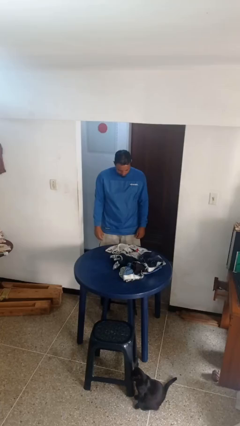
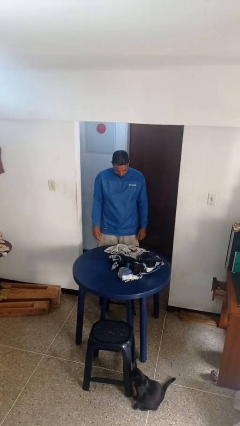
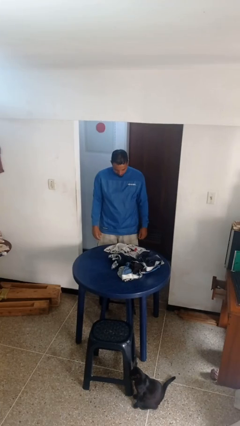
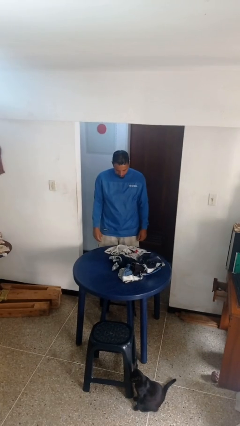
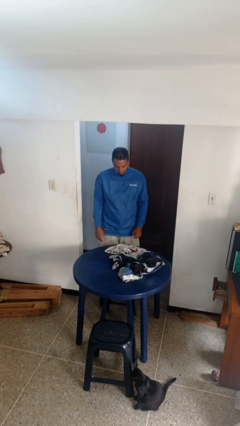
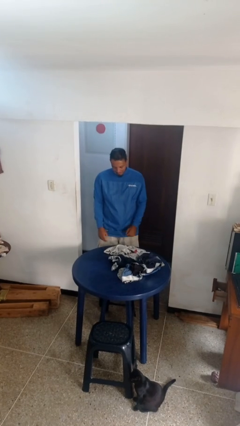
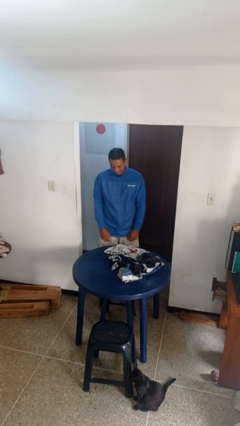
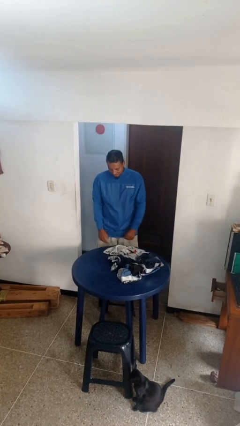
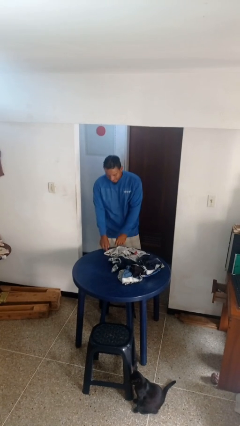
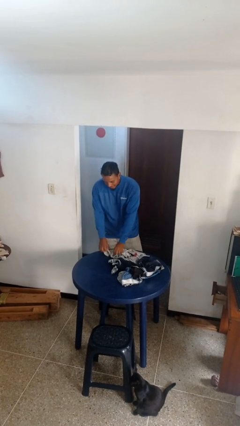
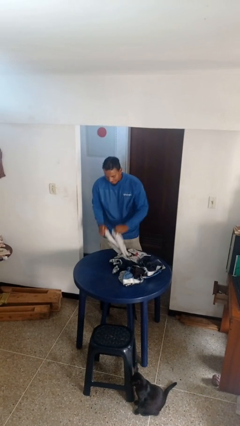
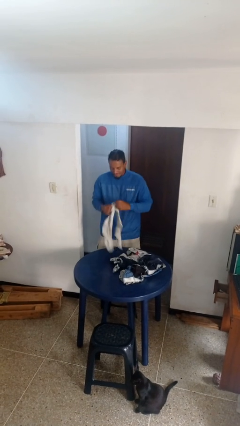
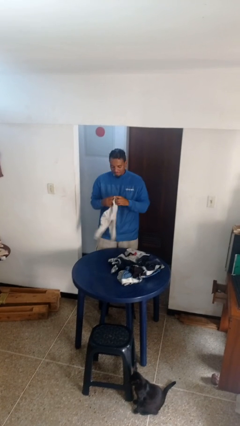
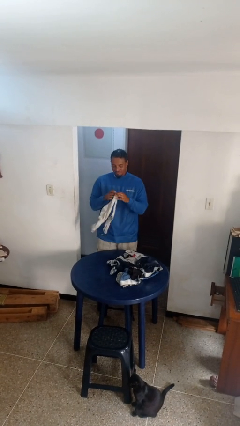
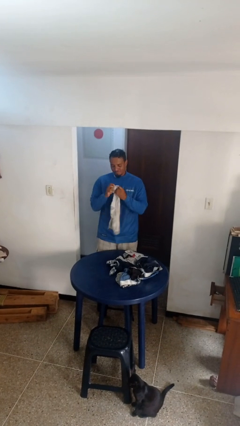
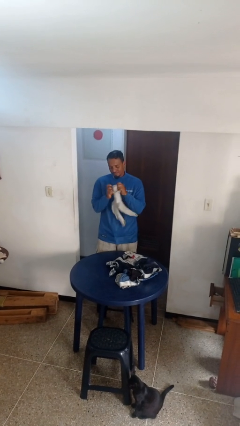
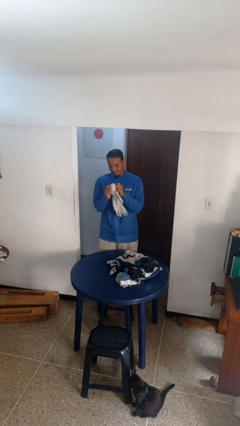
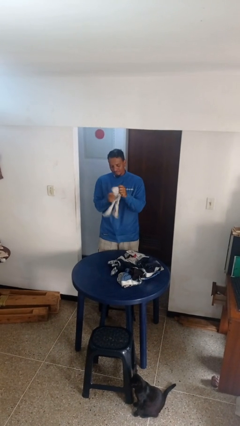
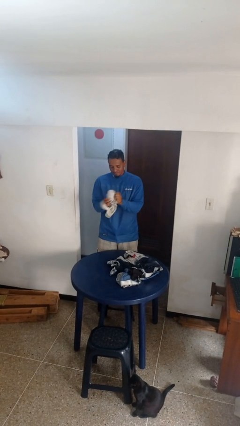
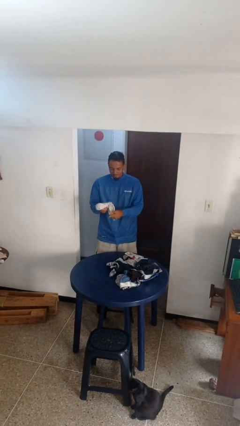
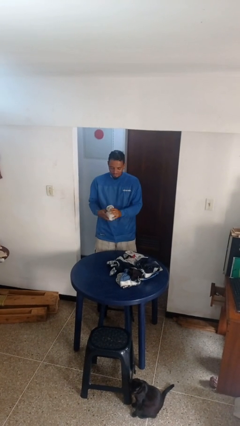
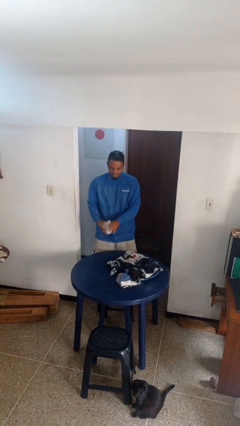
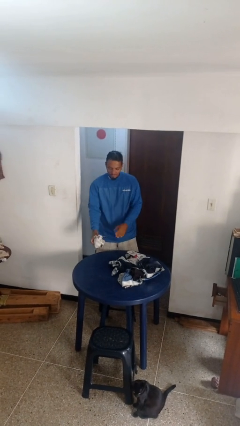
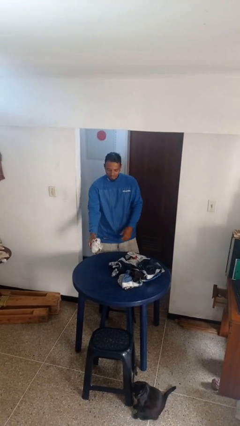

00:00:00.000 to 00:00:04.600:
person folds socks

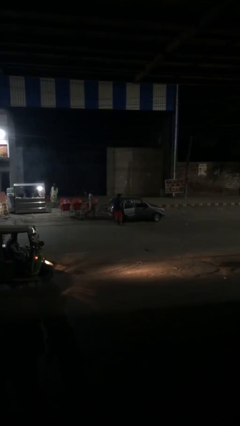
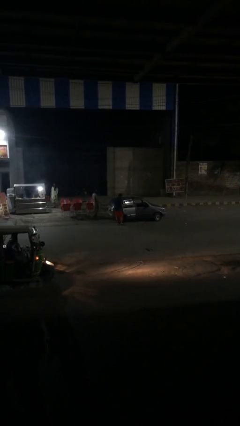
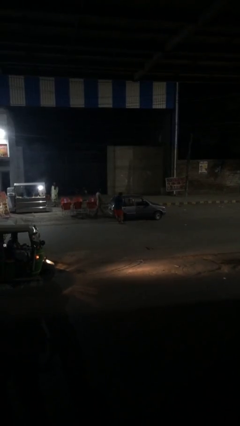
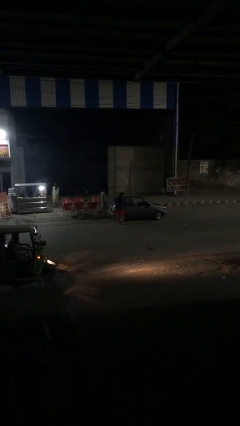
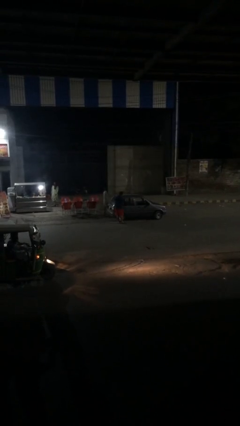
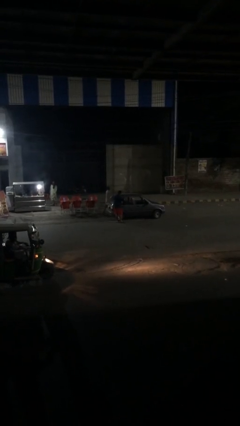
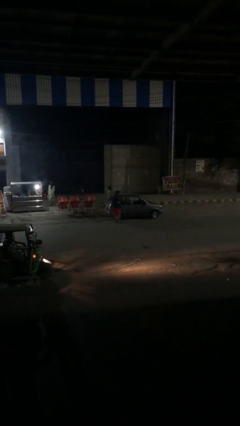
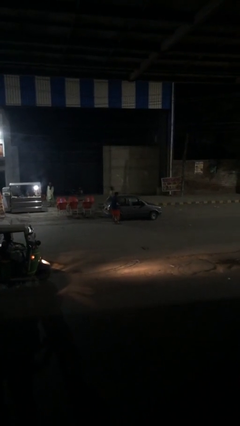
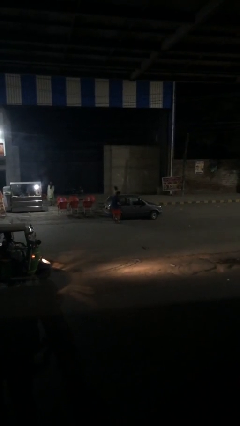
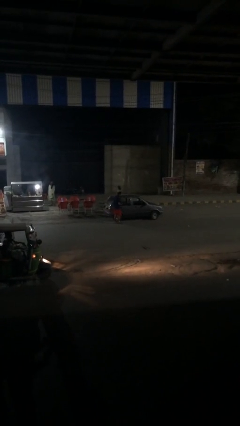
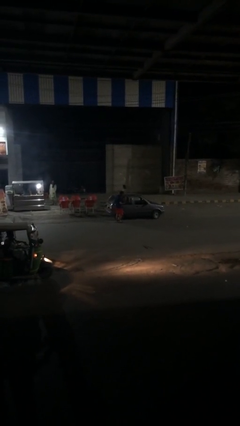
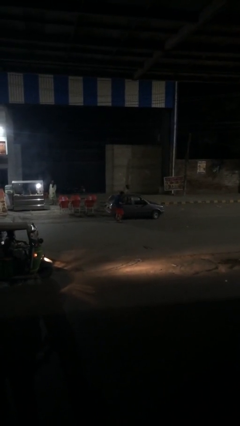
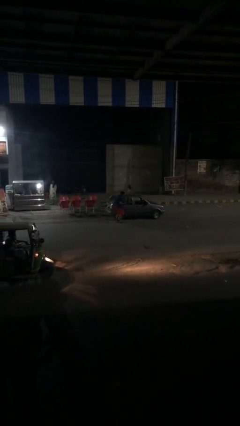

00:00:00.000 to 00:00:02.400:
person closes car door

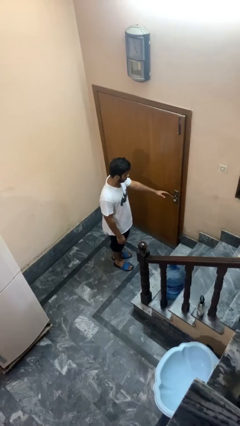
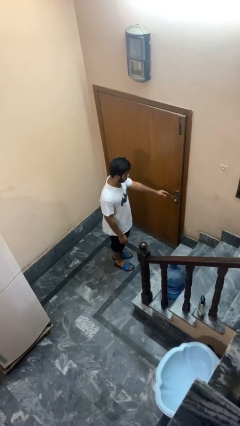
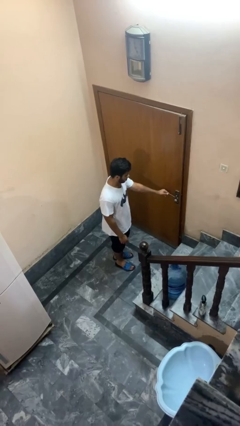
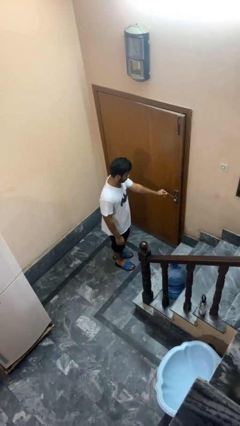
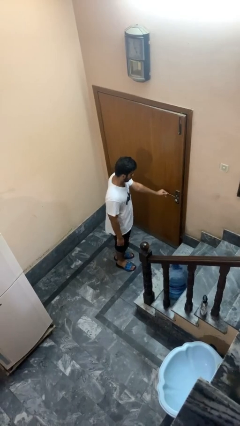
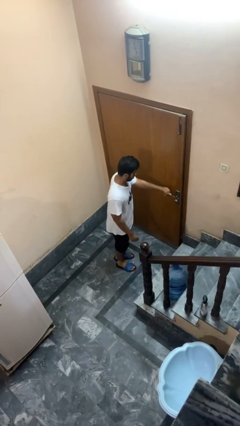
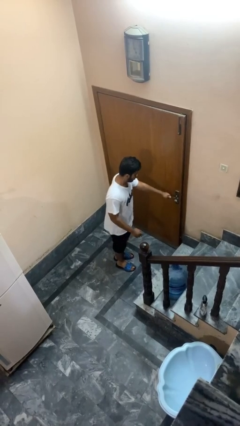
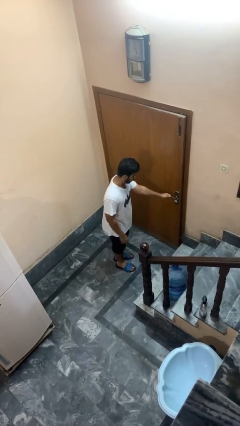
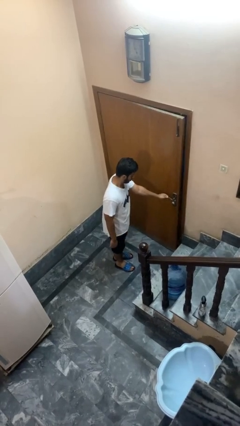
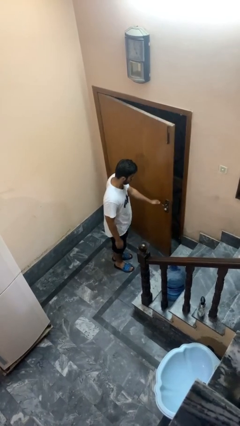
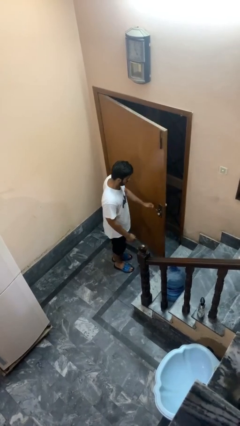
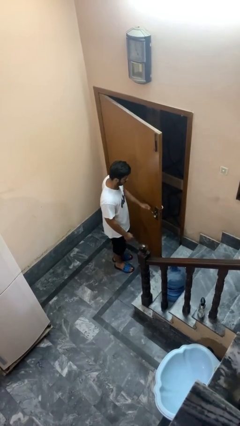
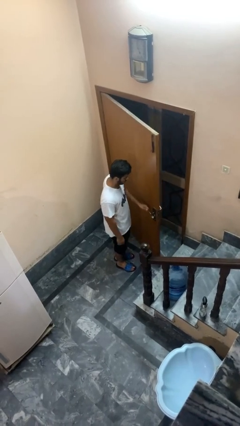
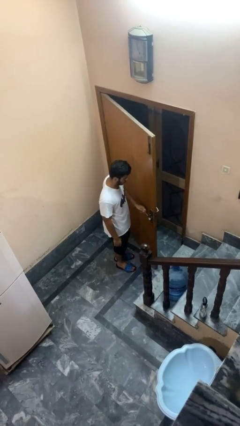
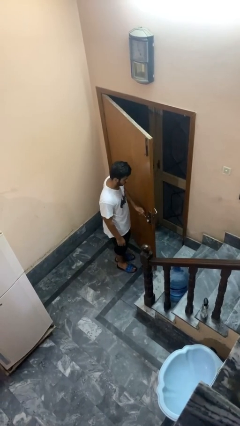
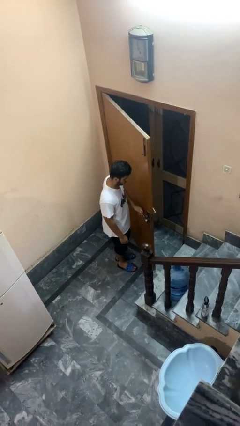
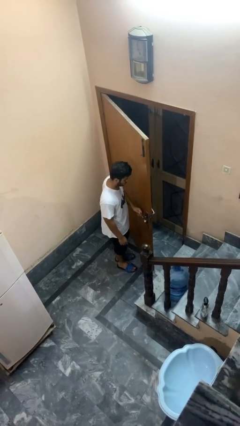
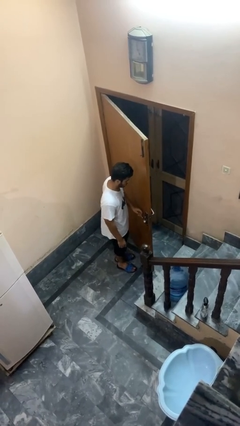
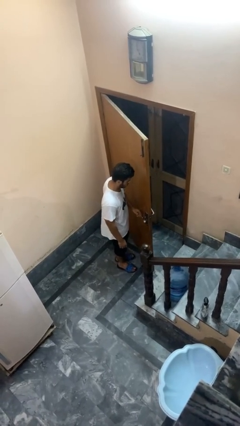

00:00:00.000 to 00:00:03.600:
person opens facility door

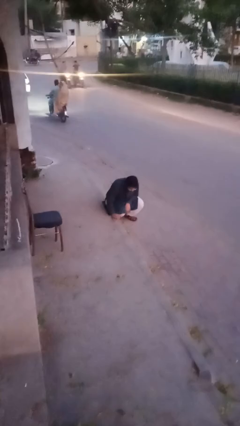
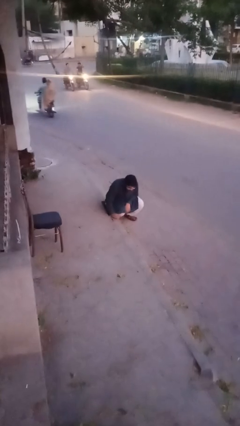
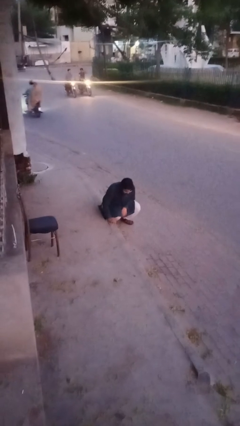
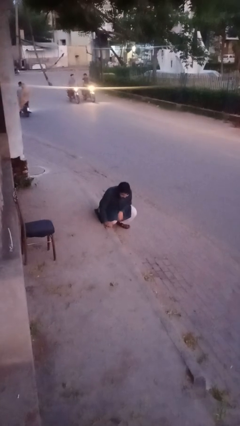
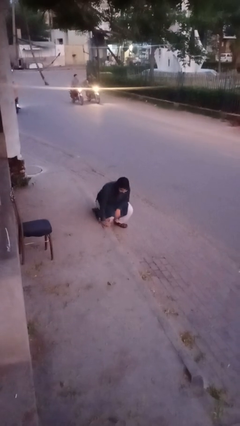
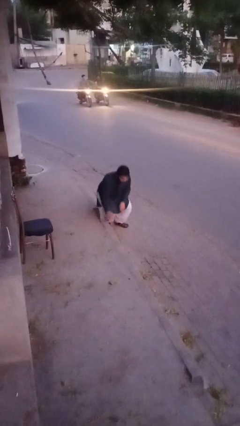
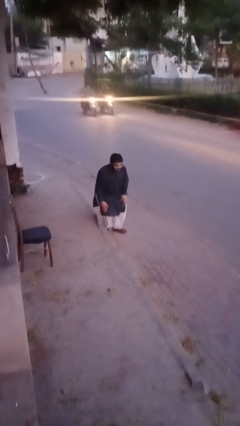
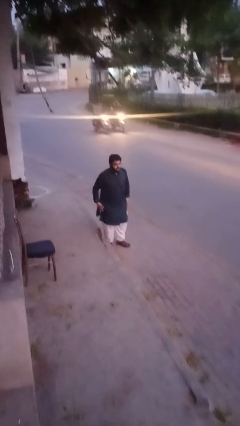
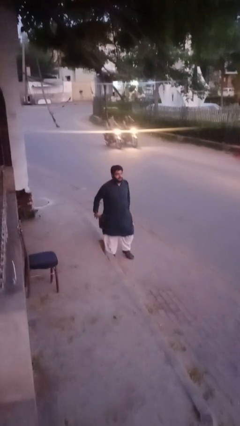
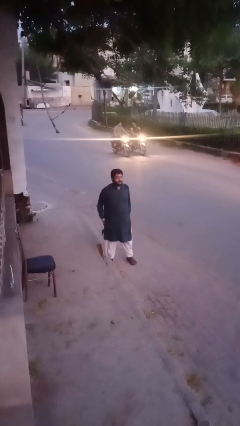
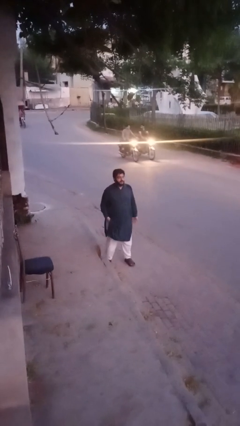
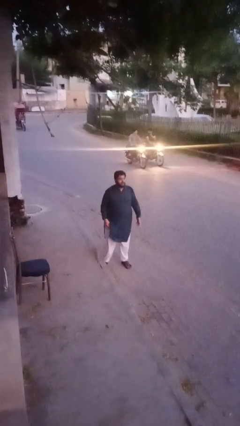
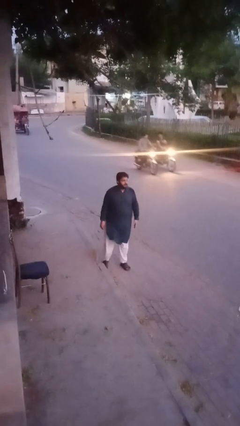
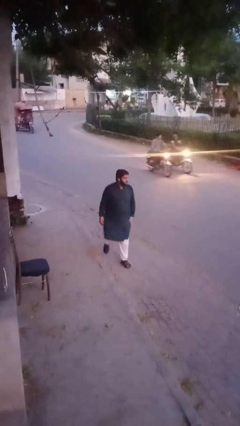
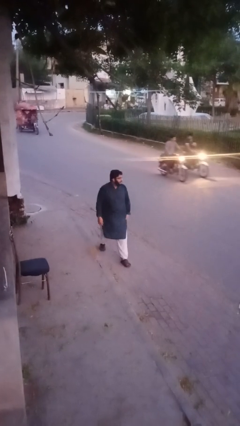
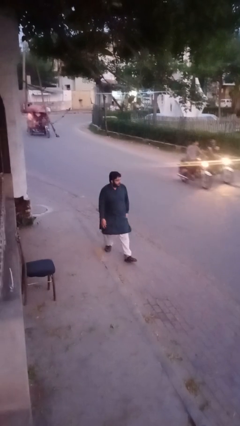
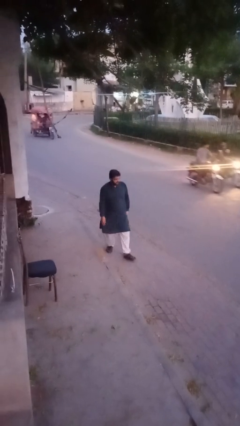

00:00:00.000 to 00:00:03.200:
person stands up from floor

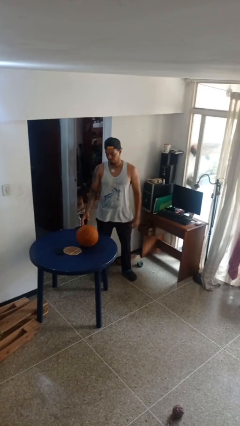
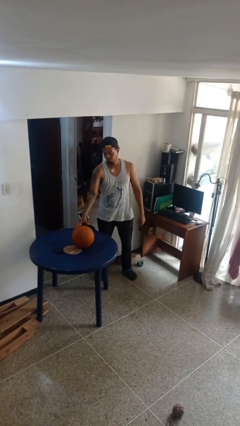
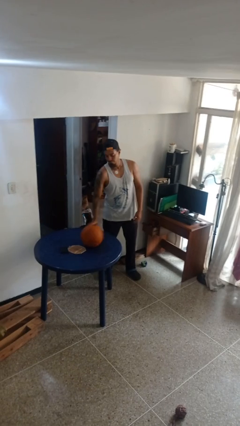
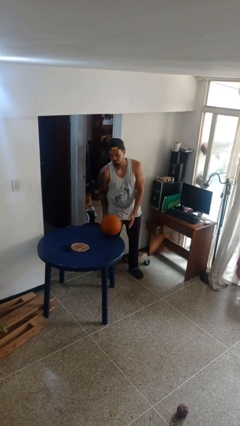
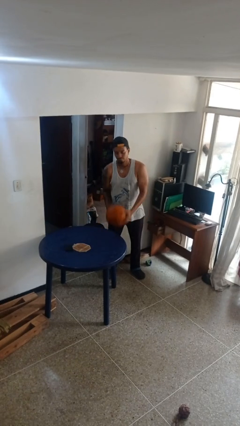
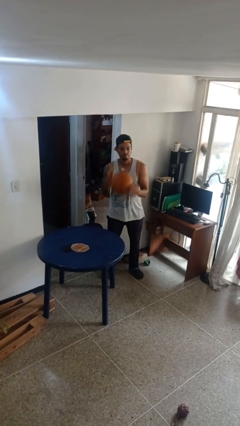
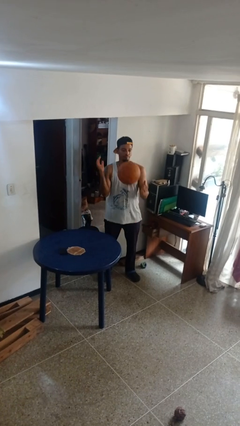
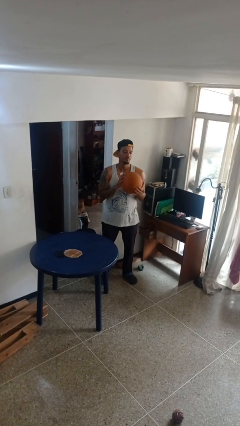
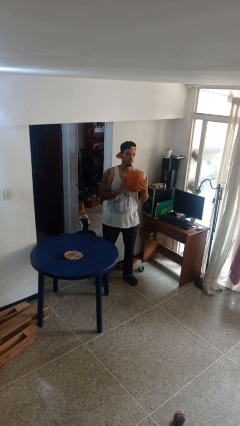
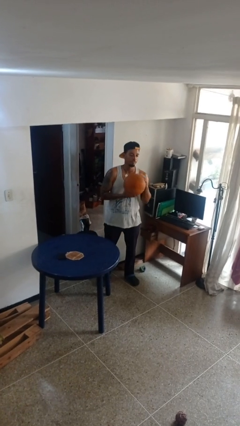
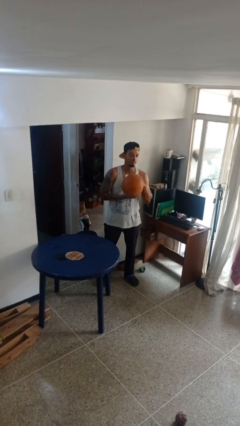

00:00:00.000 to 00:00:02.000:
person picks up object from table

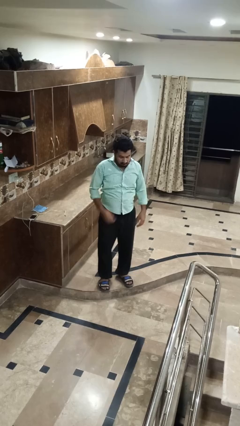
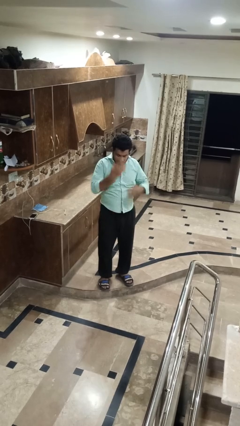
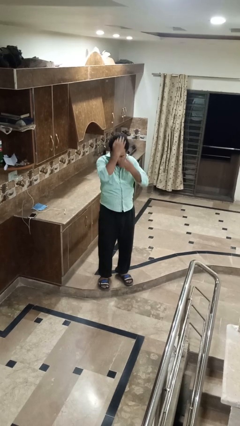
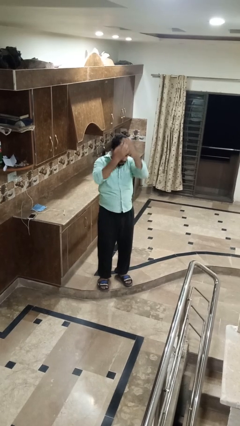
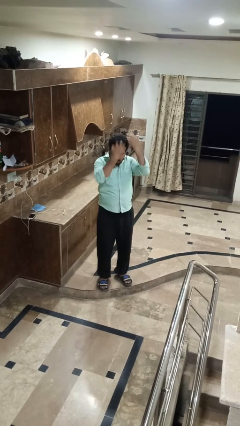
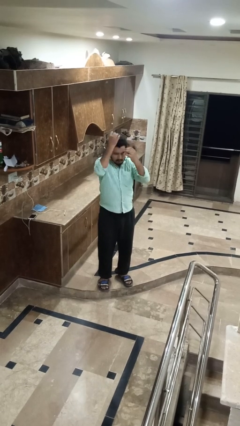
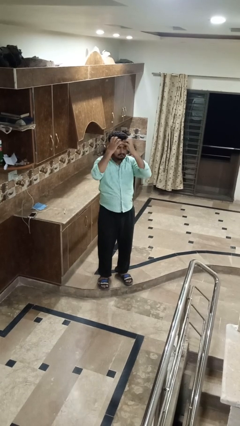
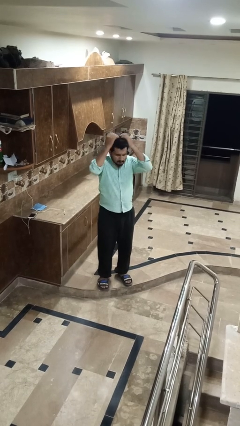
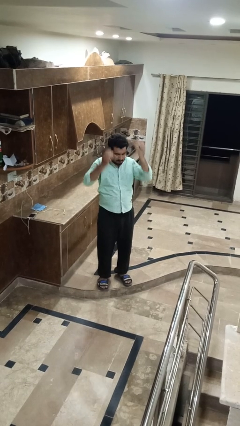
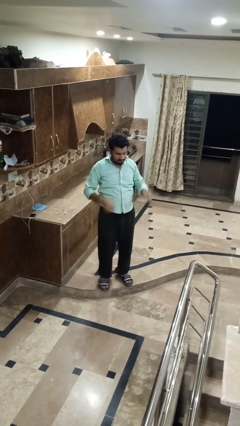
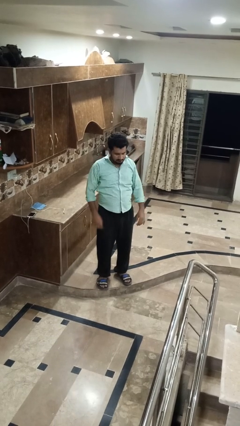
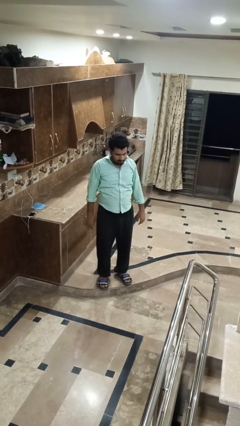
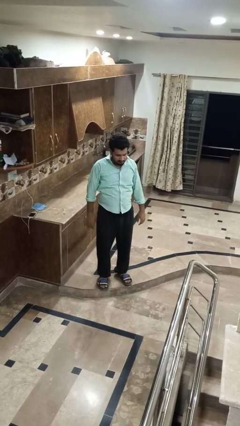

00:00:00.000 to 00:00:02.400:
person strokes hair
